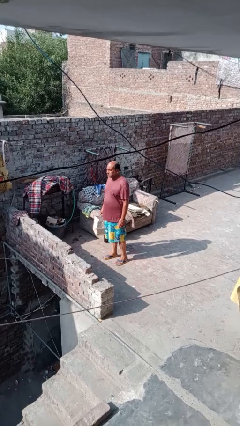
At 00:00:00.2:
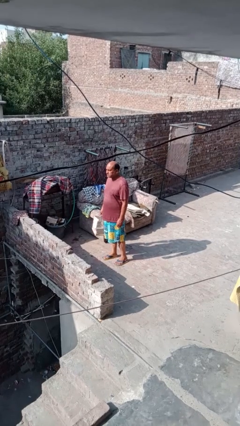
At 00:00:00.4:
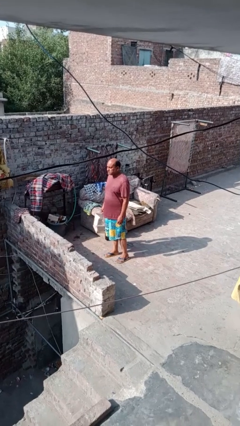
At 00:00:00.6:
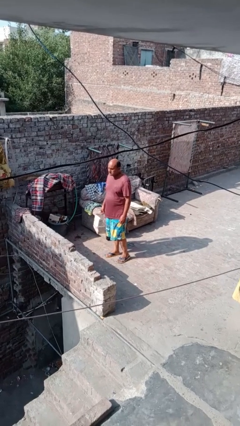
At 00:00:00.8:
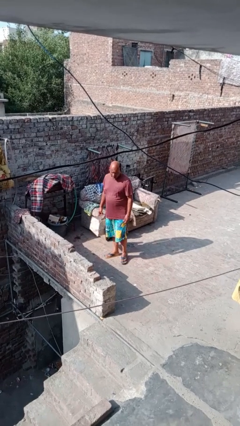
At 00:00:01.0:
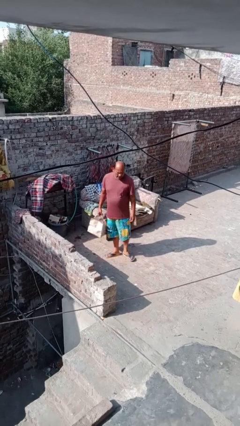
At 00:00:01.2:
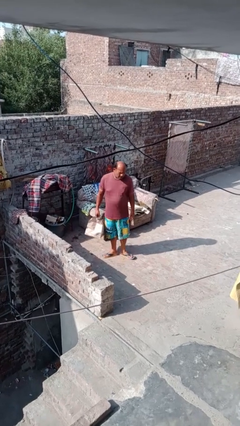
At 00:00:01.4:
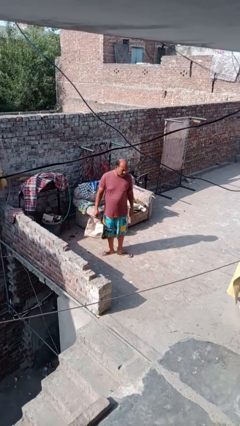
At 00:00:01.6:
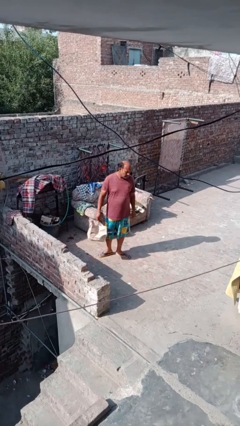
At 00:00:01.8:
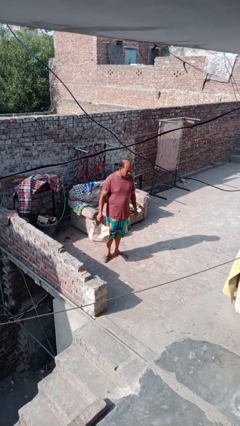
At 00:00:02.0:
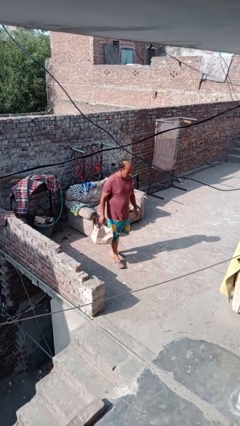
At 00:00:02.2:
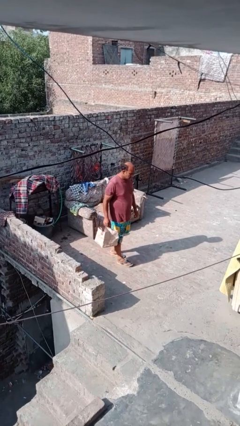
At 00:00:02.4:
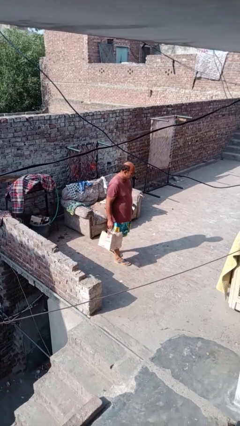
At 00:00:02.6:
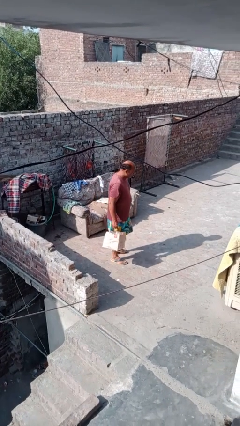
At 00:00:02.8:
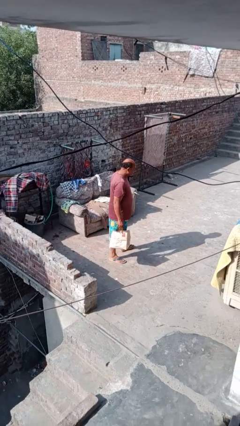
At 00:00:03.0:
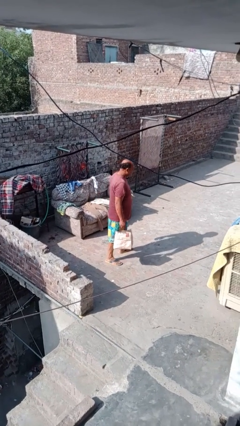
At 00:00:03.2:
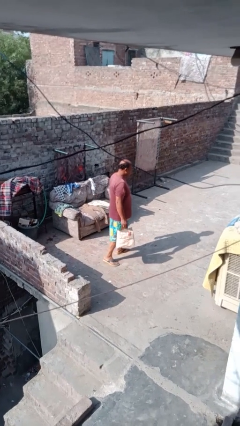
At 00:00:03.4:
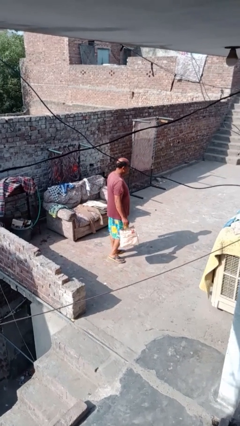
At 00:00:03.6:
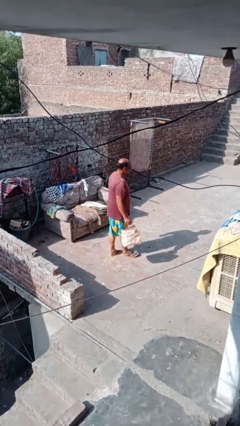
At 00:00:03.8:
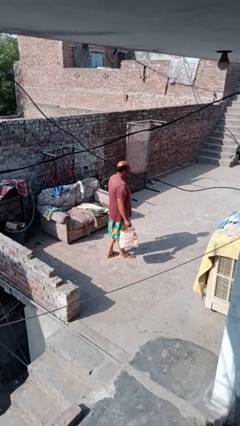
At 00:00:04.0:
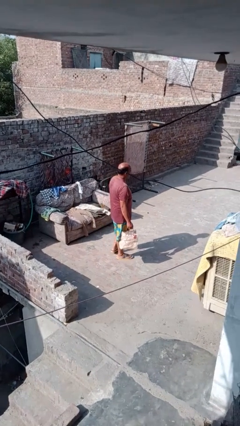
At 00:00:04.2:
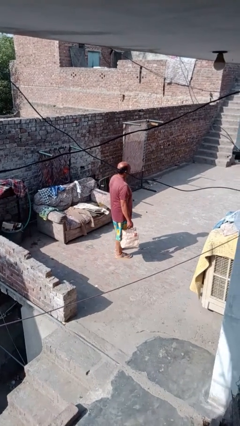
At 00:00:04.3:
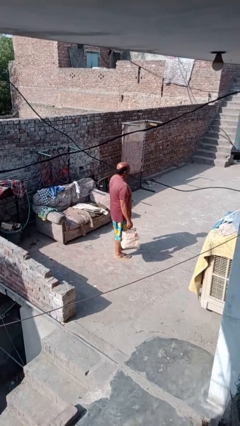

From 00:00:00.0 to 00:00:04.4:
person carries groceries

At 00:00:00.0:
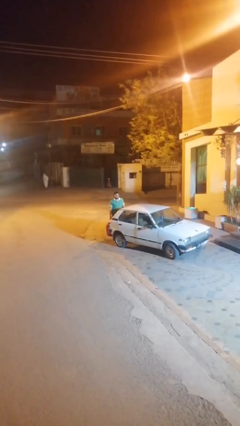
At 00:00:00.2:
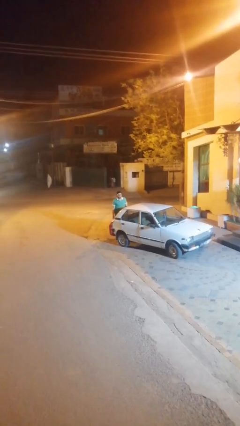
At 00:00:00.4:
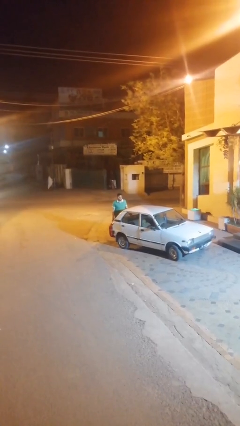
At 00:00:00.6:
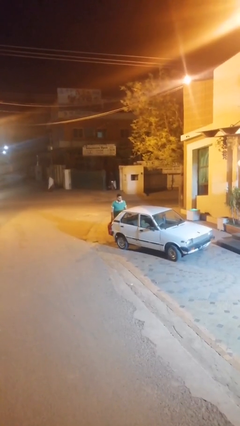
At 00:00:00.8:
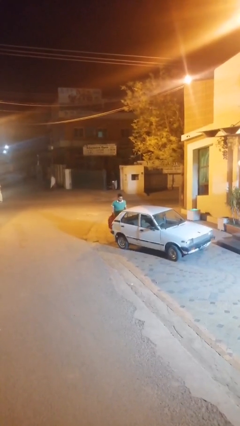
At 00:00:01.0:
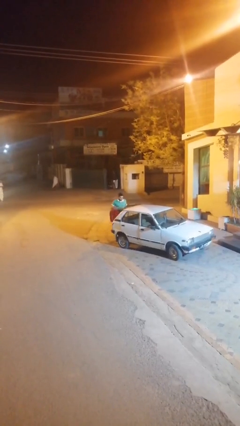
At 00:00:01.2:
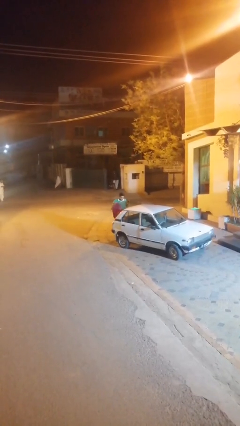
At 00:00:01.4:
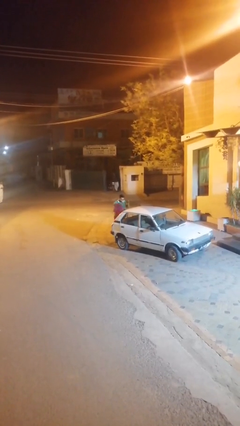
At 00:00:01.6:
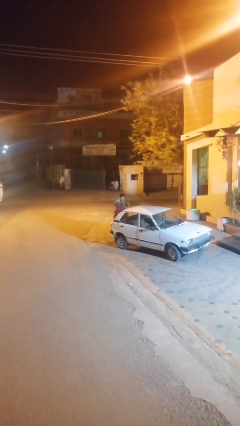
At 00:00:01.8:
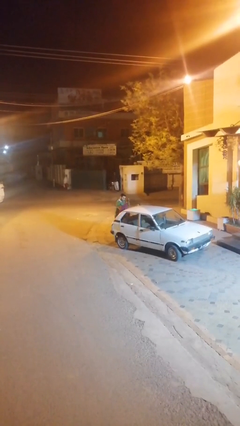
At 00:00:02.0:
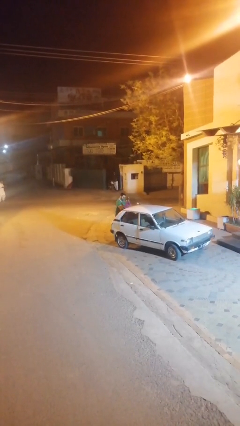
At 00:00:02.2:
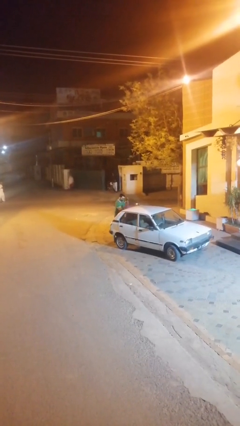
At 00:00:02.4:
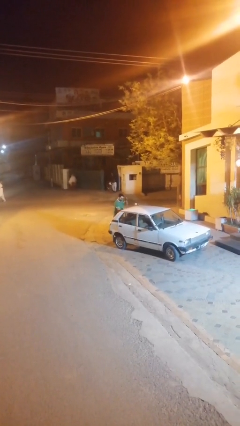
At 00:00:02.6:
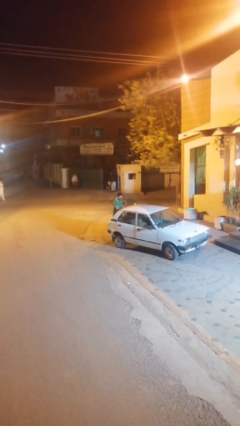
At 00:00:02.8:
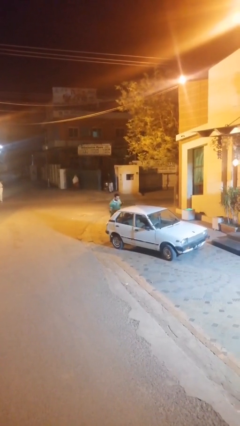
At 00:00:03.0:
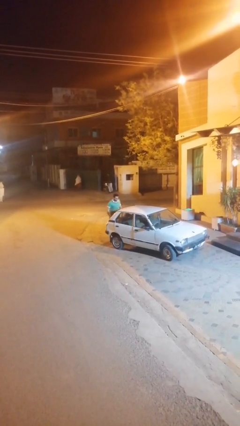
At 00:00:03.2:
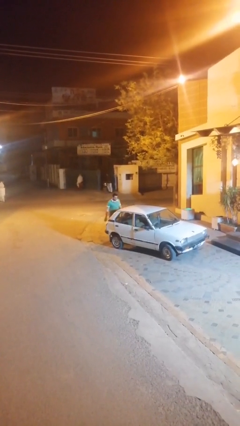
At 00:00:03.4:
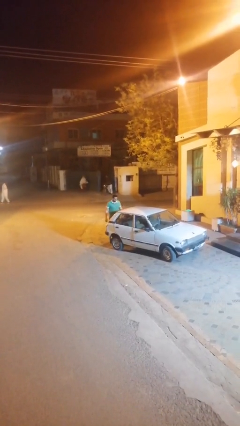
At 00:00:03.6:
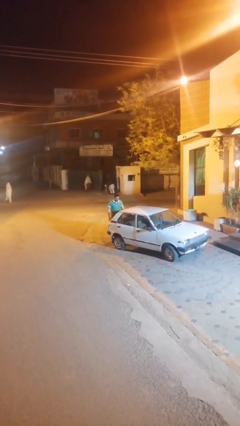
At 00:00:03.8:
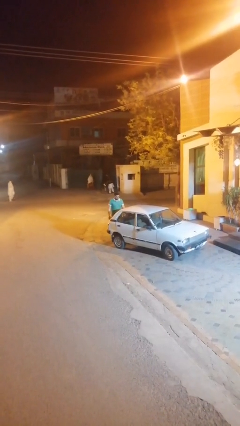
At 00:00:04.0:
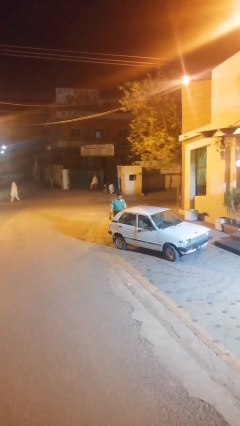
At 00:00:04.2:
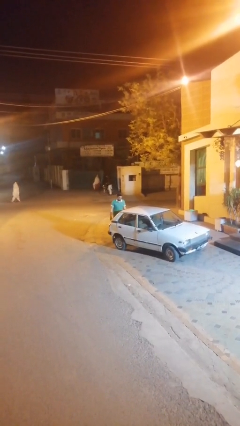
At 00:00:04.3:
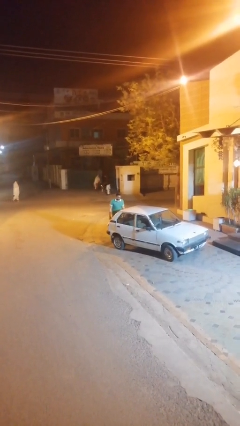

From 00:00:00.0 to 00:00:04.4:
person loads car

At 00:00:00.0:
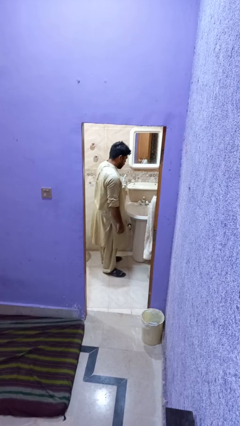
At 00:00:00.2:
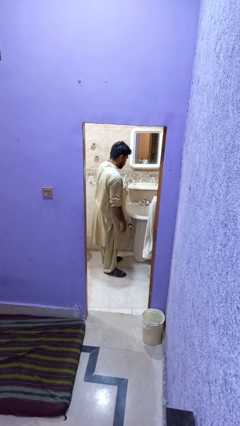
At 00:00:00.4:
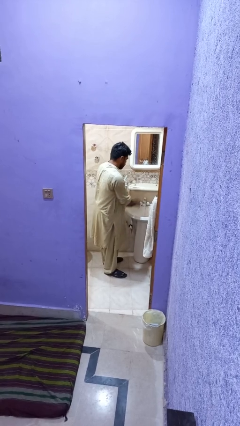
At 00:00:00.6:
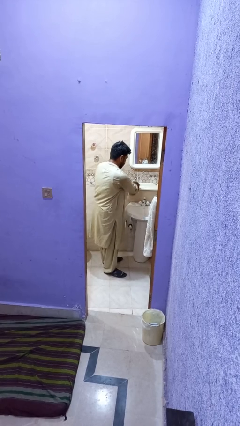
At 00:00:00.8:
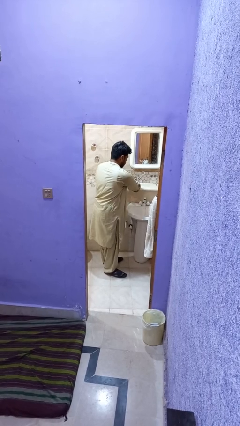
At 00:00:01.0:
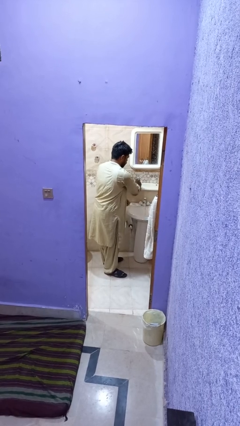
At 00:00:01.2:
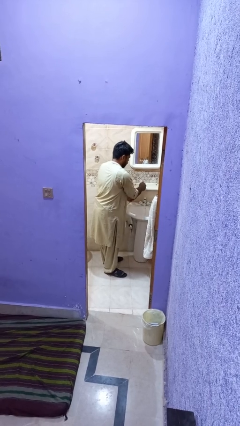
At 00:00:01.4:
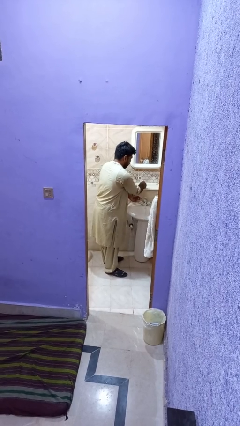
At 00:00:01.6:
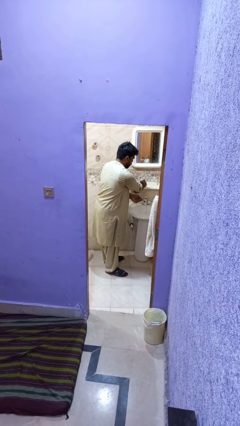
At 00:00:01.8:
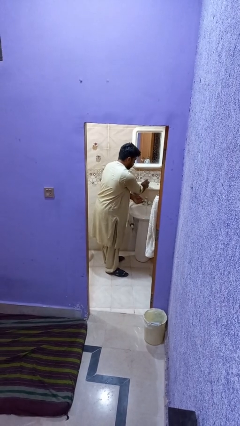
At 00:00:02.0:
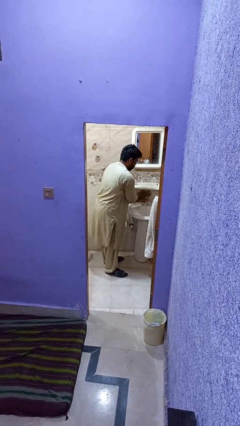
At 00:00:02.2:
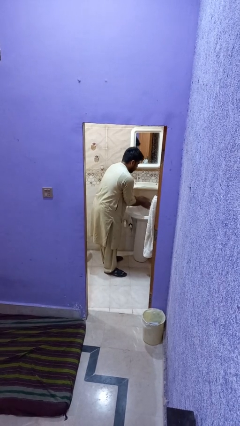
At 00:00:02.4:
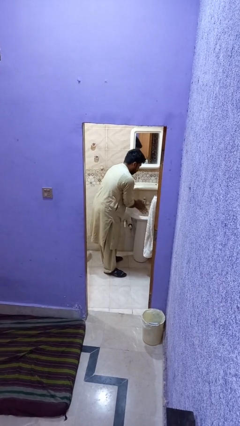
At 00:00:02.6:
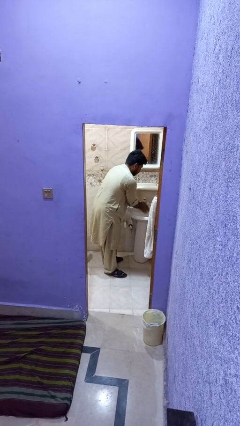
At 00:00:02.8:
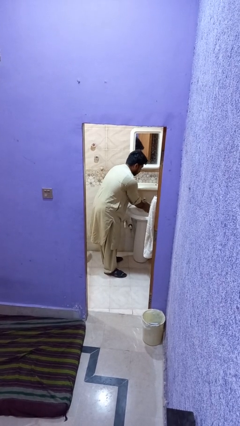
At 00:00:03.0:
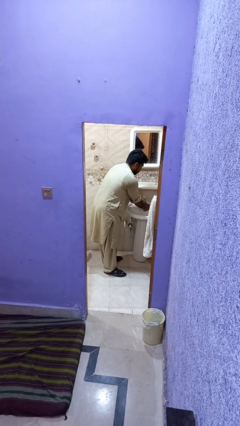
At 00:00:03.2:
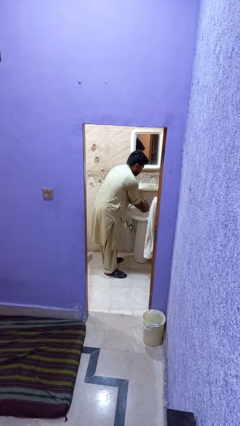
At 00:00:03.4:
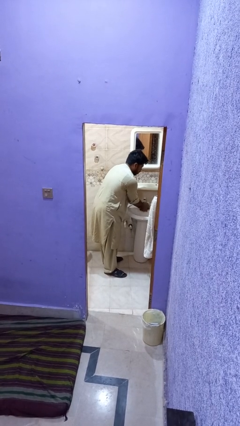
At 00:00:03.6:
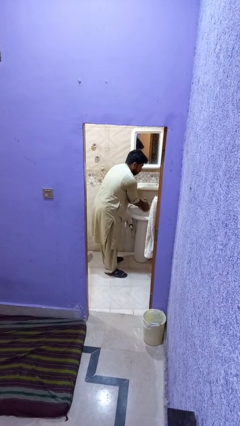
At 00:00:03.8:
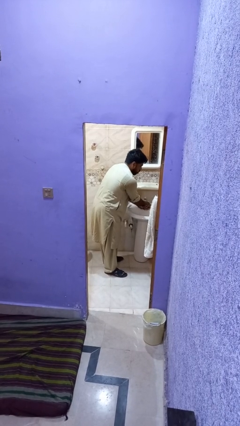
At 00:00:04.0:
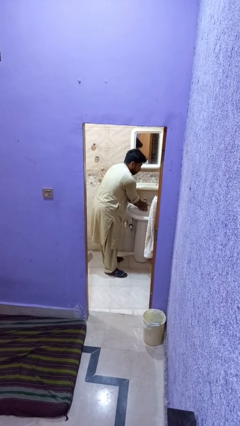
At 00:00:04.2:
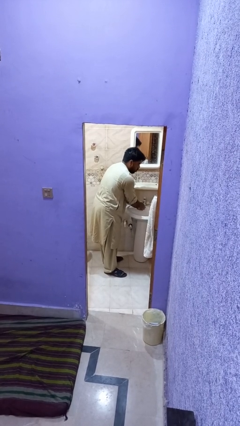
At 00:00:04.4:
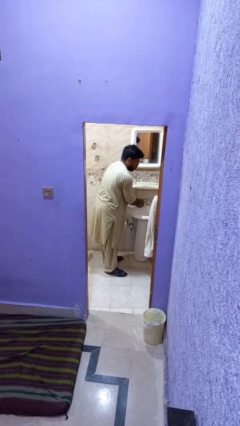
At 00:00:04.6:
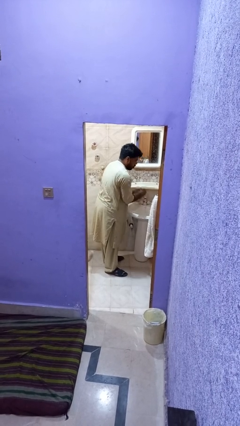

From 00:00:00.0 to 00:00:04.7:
person washes hands

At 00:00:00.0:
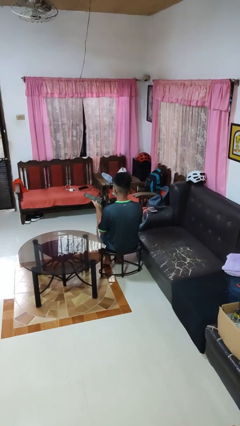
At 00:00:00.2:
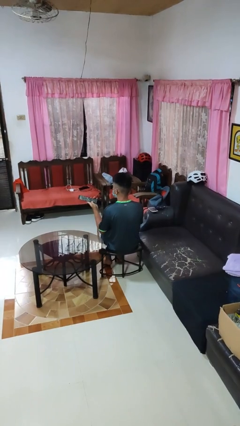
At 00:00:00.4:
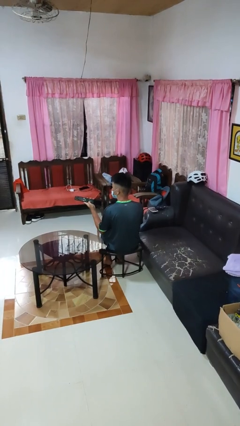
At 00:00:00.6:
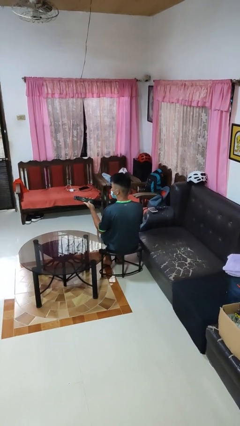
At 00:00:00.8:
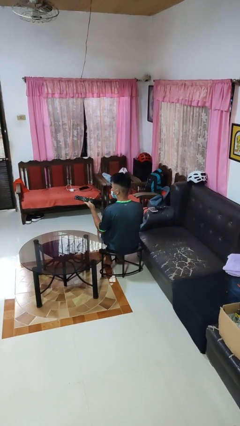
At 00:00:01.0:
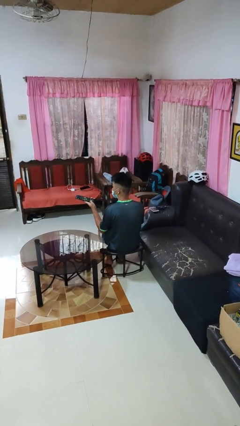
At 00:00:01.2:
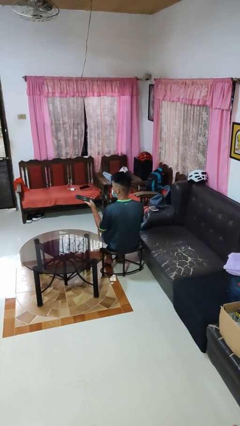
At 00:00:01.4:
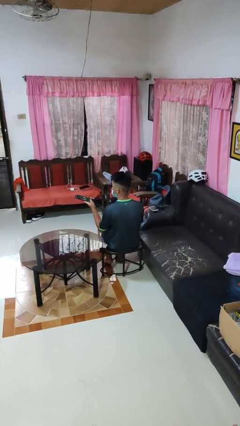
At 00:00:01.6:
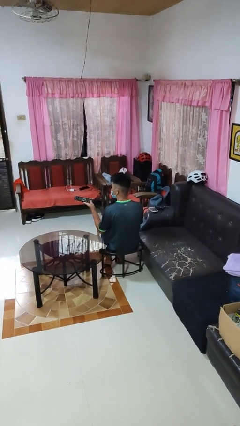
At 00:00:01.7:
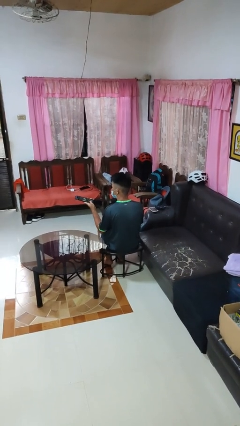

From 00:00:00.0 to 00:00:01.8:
person uses television remote

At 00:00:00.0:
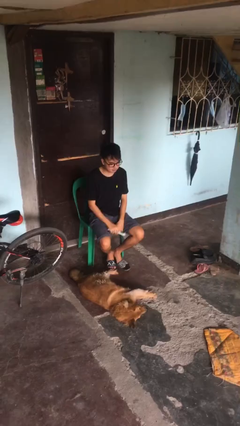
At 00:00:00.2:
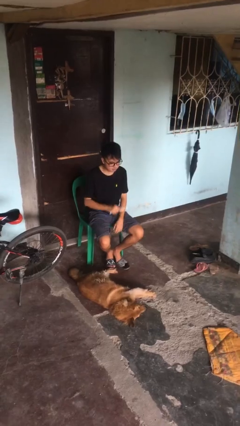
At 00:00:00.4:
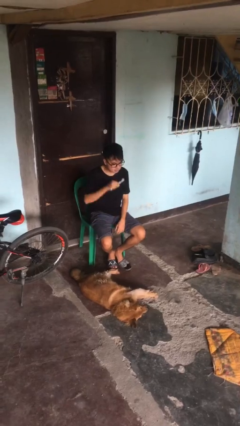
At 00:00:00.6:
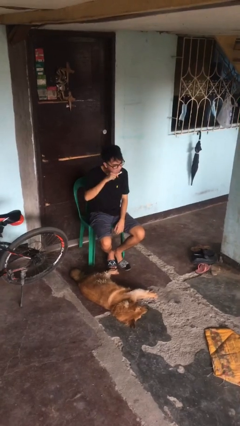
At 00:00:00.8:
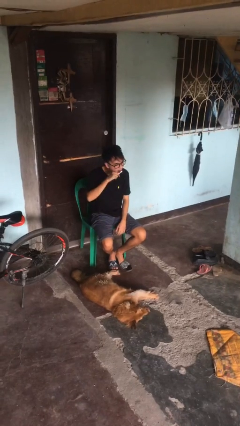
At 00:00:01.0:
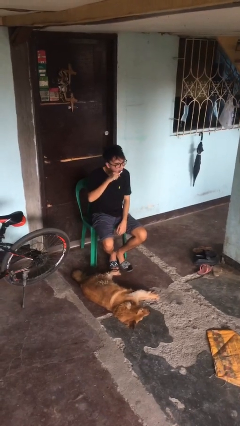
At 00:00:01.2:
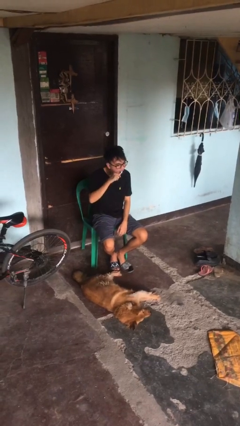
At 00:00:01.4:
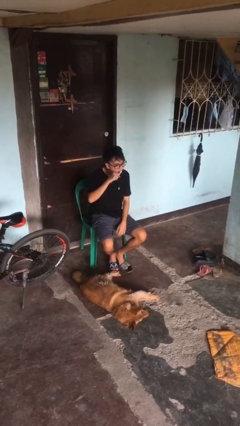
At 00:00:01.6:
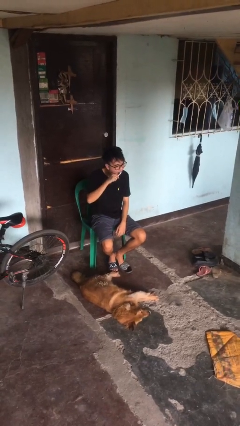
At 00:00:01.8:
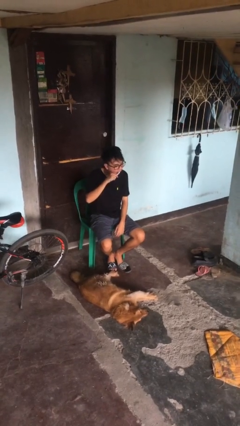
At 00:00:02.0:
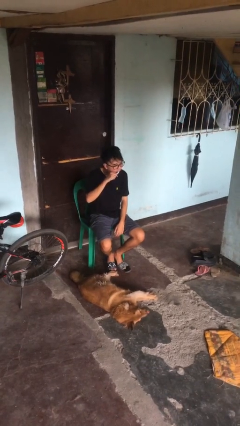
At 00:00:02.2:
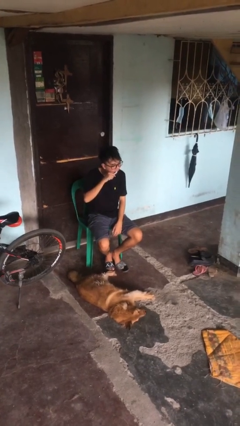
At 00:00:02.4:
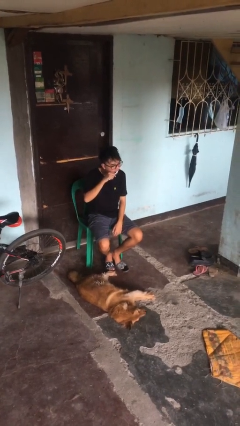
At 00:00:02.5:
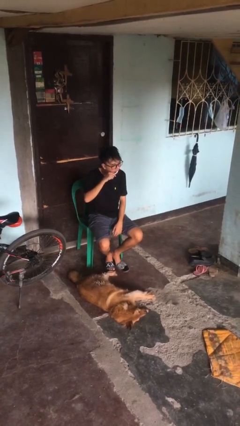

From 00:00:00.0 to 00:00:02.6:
person brushes teeth
